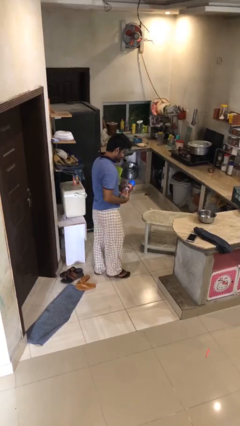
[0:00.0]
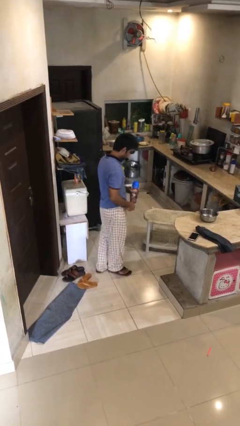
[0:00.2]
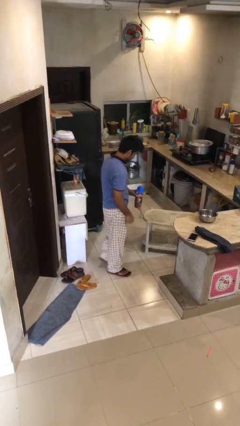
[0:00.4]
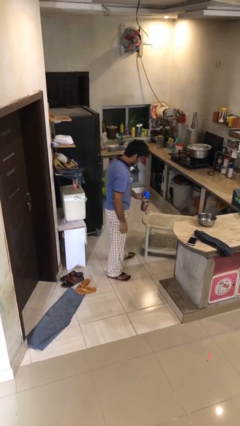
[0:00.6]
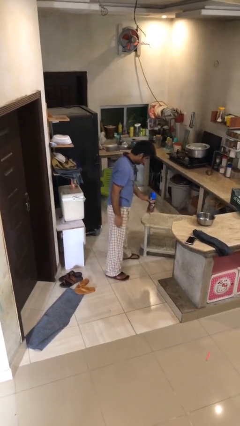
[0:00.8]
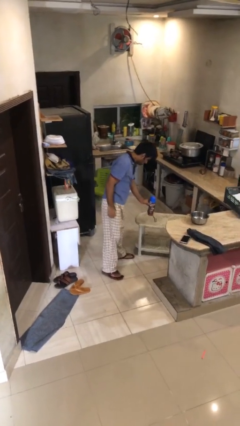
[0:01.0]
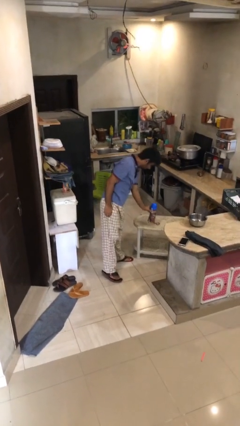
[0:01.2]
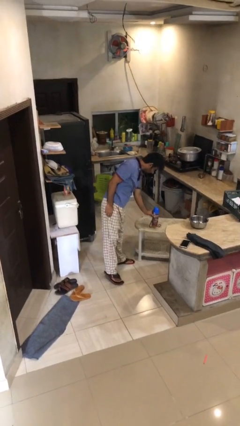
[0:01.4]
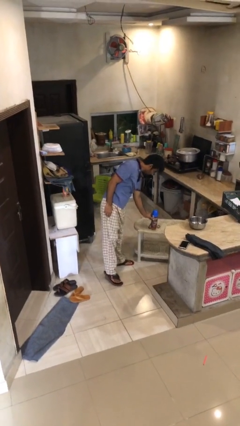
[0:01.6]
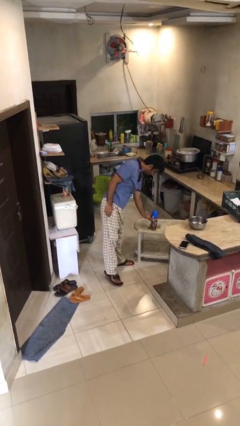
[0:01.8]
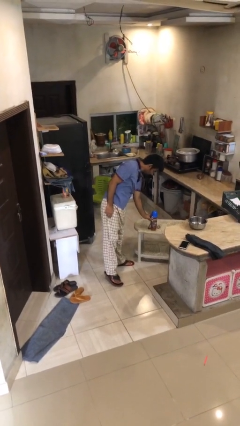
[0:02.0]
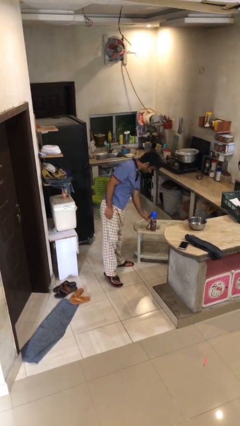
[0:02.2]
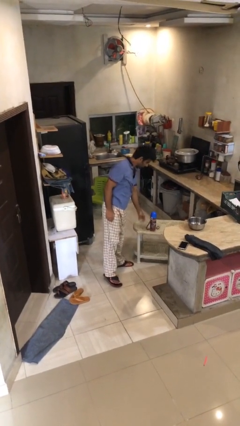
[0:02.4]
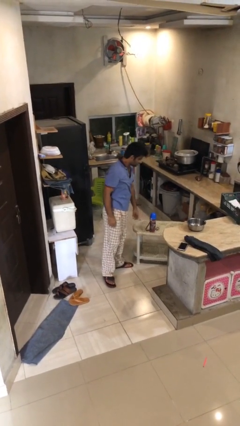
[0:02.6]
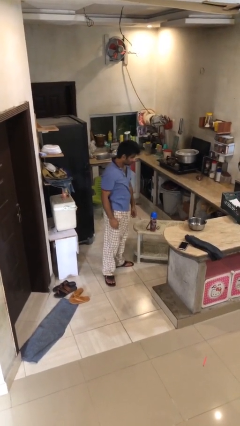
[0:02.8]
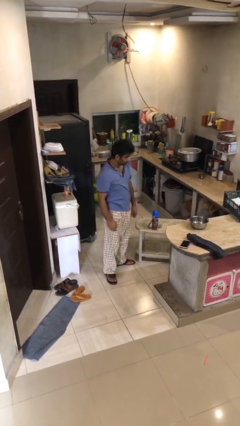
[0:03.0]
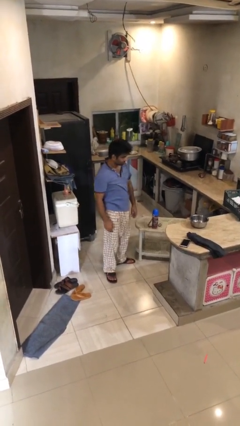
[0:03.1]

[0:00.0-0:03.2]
person puts down object on table

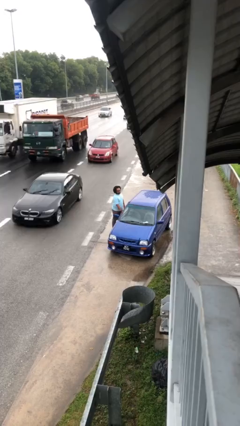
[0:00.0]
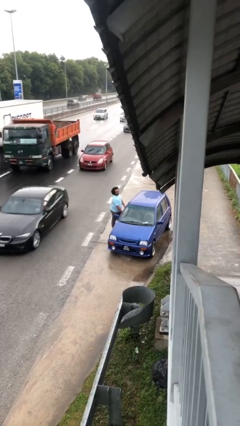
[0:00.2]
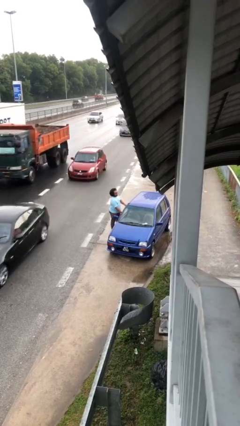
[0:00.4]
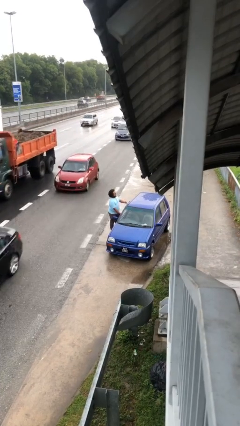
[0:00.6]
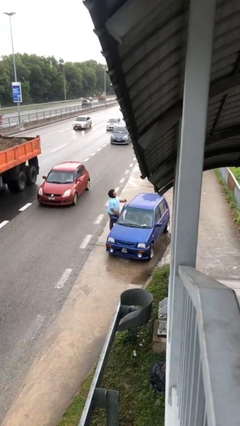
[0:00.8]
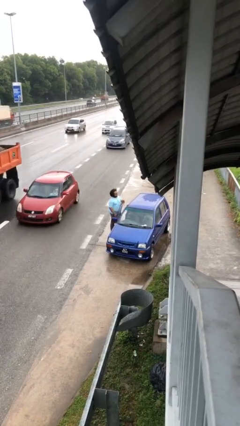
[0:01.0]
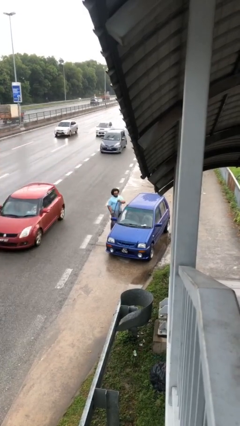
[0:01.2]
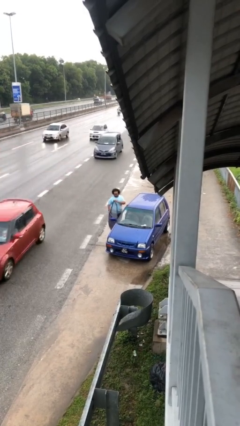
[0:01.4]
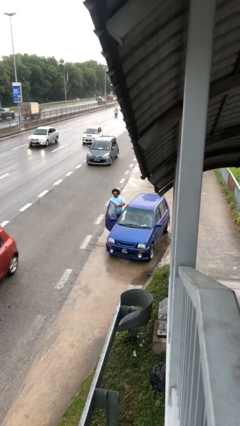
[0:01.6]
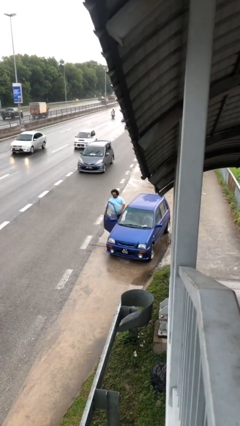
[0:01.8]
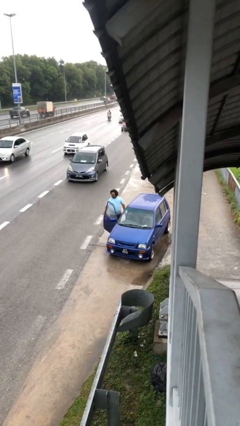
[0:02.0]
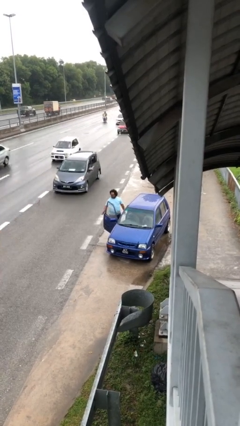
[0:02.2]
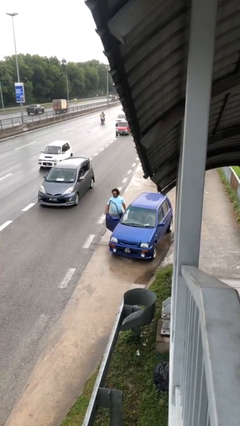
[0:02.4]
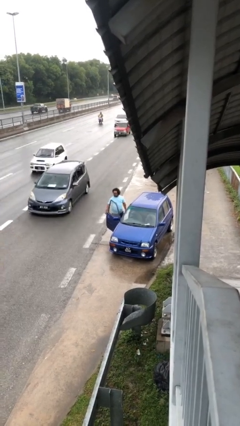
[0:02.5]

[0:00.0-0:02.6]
person opens car door

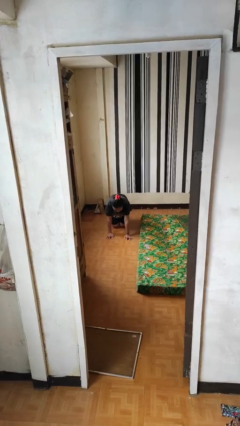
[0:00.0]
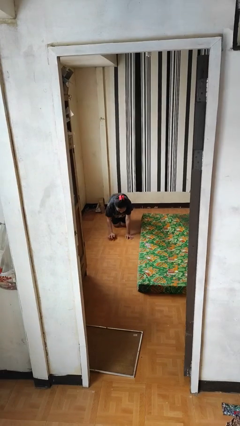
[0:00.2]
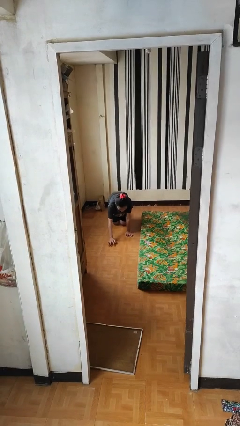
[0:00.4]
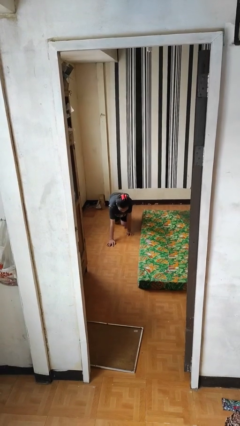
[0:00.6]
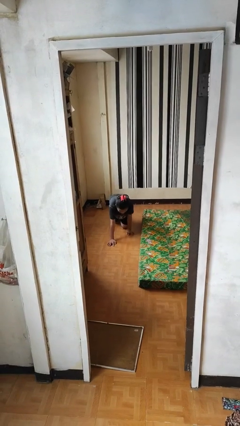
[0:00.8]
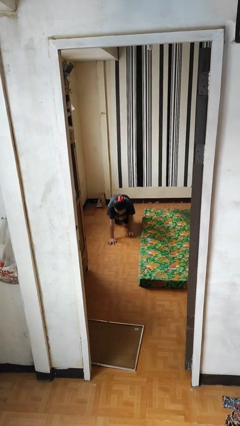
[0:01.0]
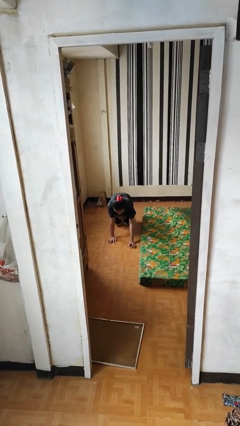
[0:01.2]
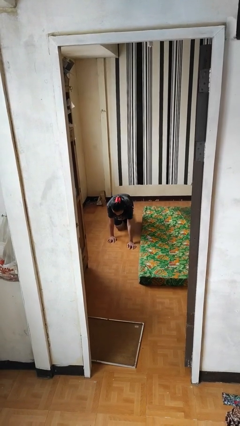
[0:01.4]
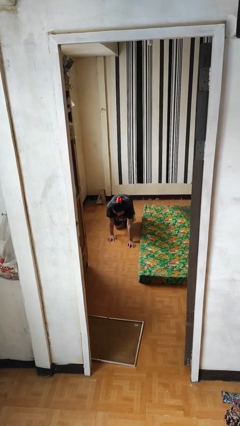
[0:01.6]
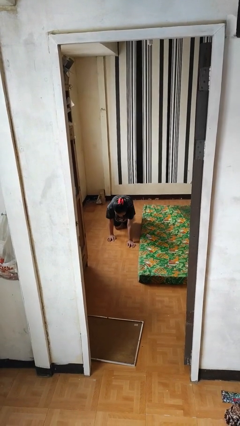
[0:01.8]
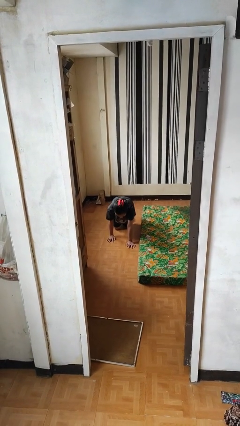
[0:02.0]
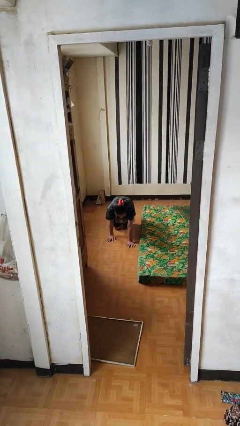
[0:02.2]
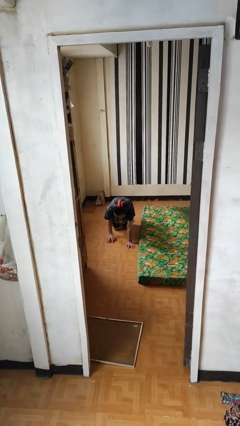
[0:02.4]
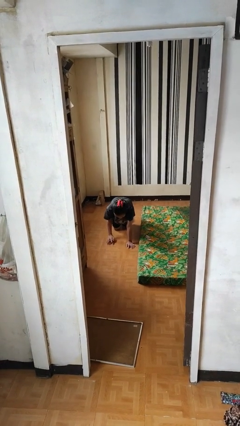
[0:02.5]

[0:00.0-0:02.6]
person crawls

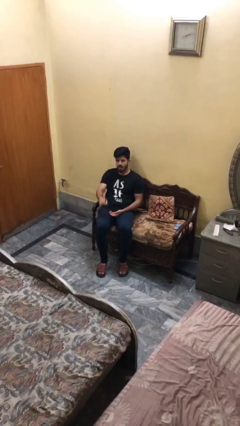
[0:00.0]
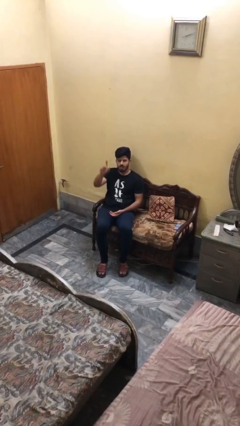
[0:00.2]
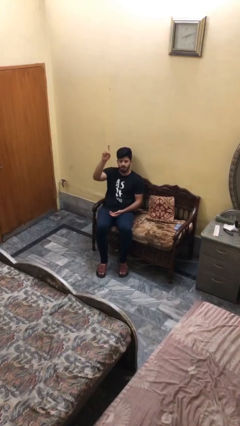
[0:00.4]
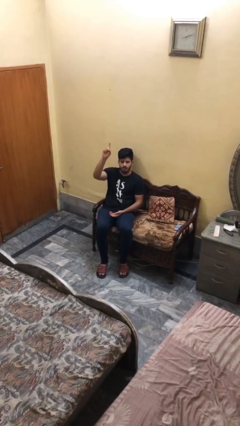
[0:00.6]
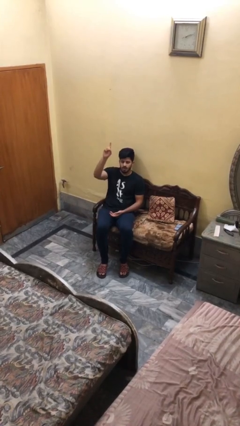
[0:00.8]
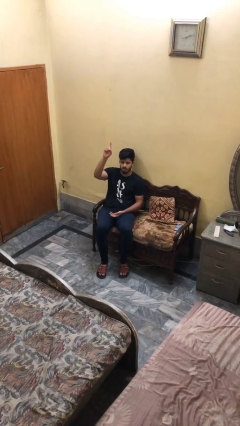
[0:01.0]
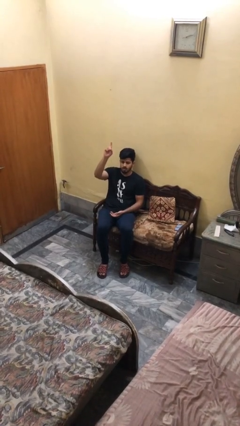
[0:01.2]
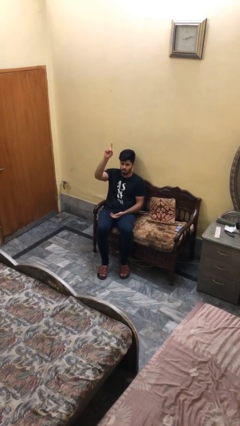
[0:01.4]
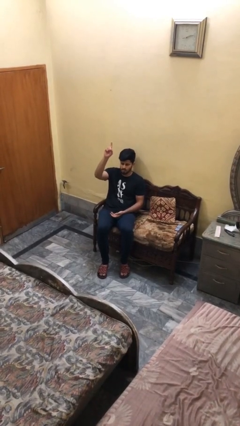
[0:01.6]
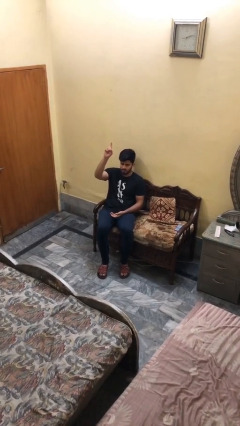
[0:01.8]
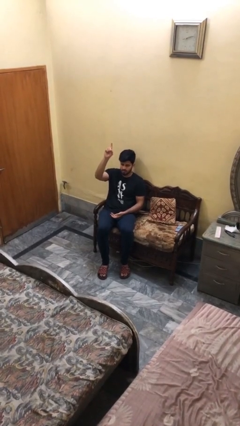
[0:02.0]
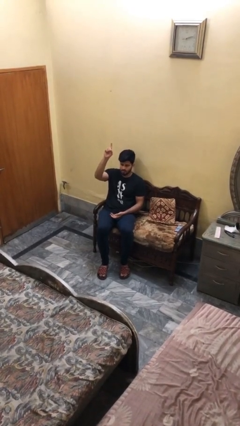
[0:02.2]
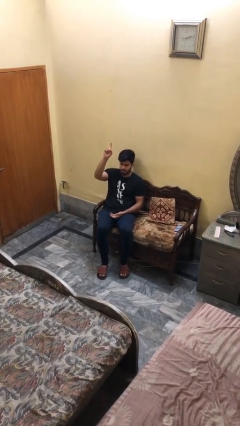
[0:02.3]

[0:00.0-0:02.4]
person gestures raise hand

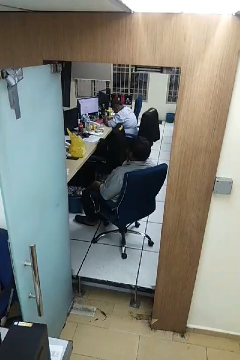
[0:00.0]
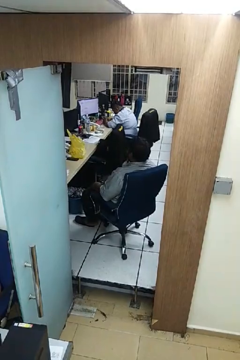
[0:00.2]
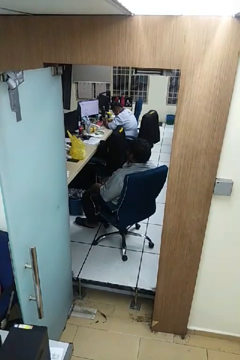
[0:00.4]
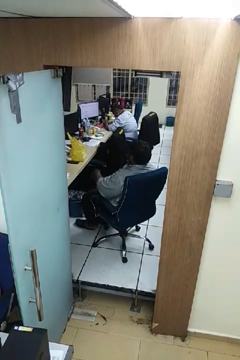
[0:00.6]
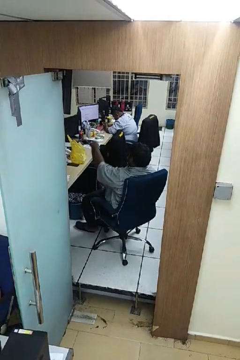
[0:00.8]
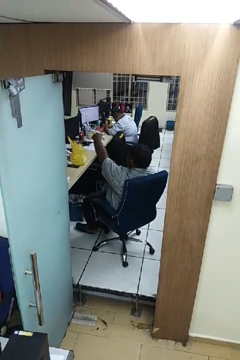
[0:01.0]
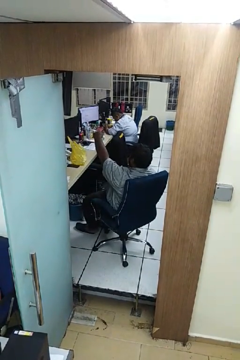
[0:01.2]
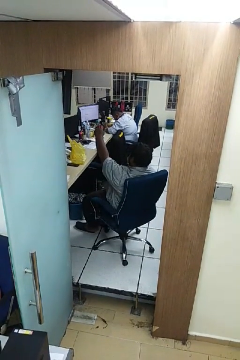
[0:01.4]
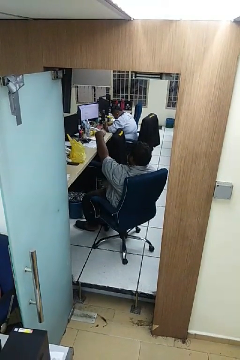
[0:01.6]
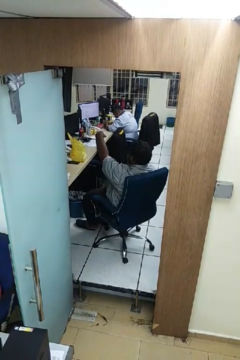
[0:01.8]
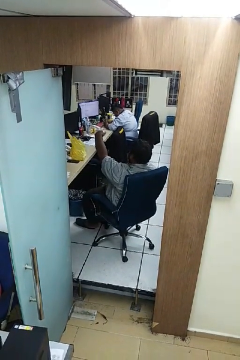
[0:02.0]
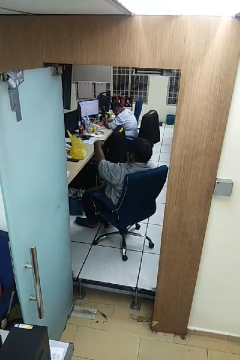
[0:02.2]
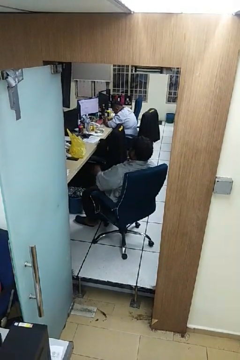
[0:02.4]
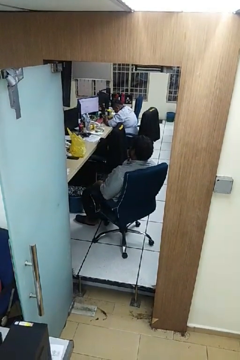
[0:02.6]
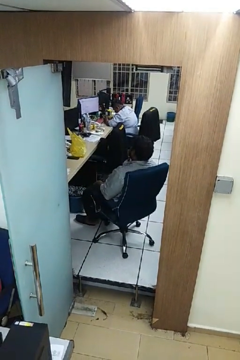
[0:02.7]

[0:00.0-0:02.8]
person gestures come here

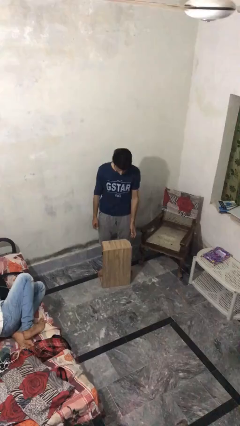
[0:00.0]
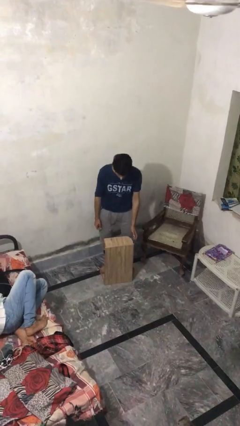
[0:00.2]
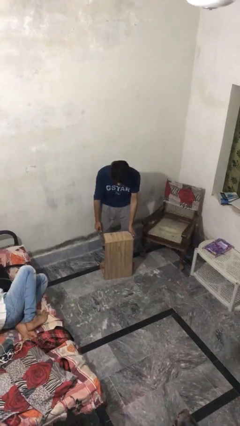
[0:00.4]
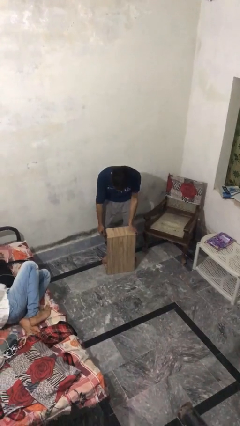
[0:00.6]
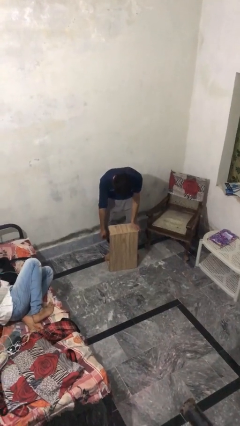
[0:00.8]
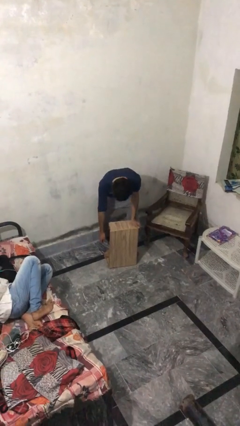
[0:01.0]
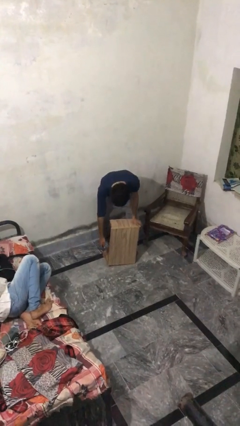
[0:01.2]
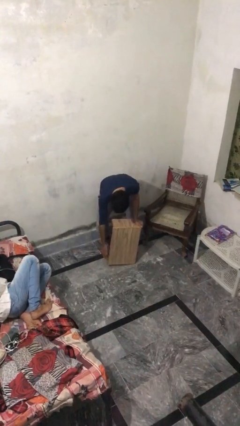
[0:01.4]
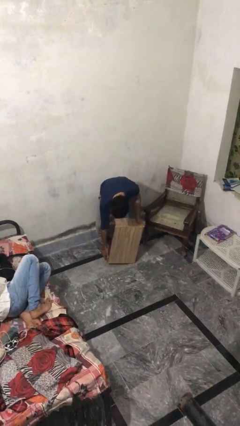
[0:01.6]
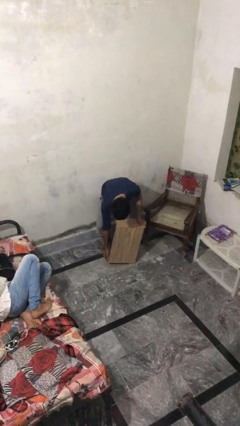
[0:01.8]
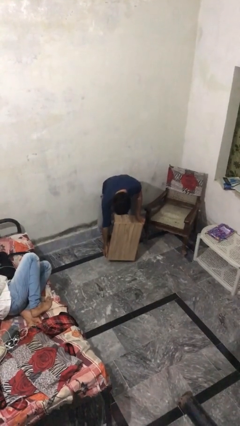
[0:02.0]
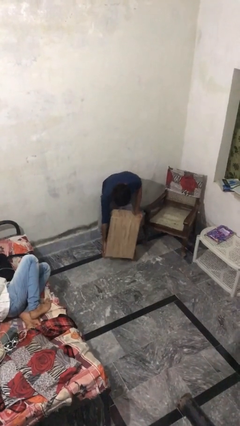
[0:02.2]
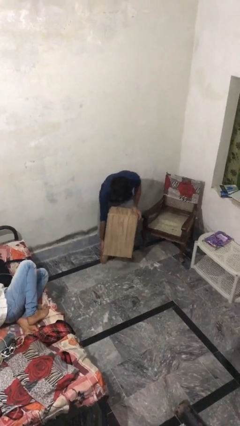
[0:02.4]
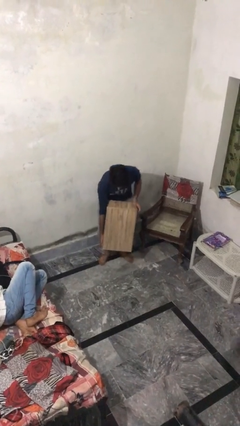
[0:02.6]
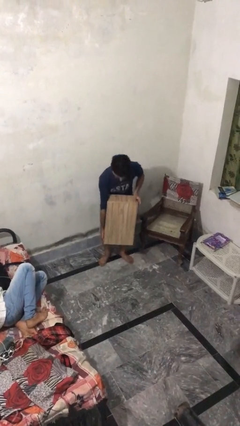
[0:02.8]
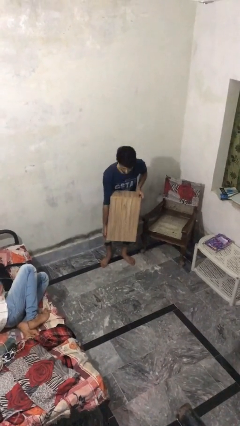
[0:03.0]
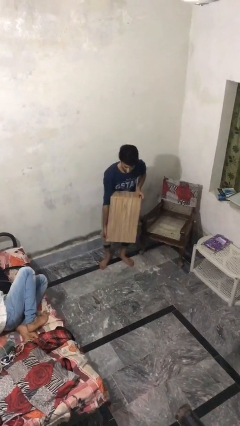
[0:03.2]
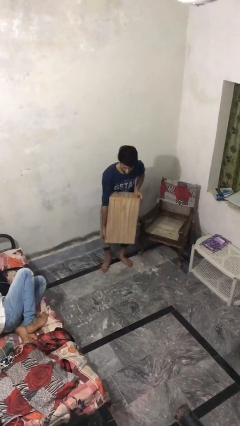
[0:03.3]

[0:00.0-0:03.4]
person picks up object from floor

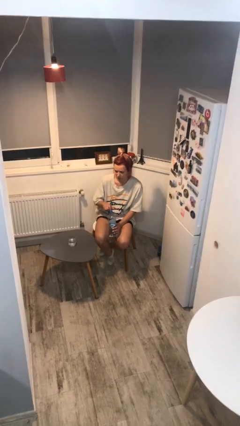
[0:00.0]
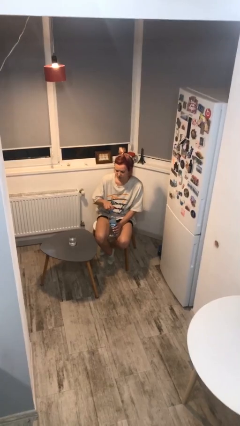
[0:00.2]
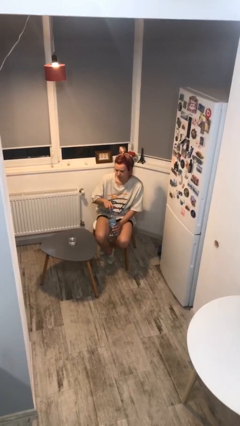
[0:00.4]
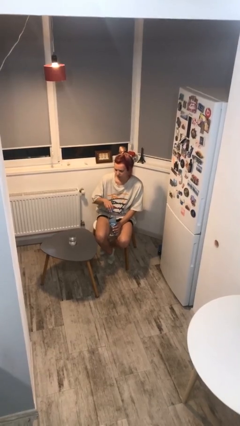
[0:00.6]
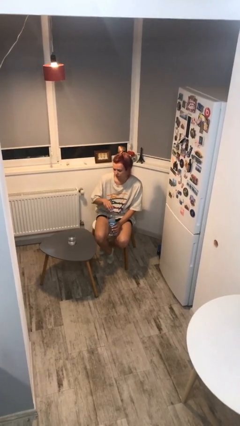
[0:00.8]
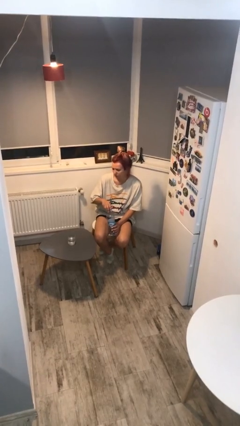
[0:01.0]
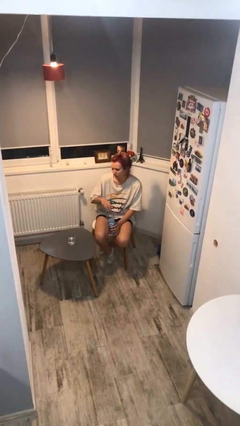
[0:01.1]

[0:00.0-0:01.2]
person unscrews lid from bottle
